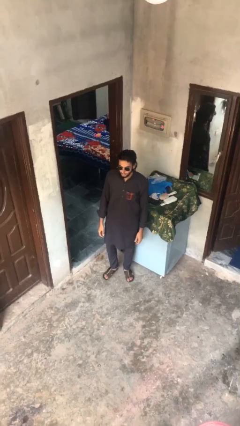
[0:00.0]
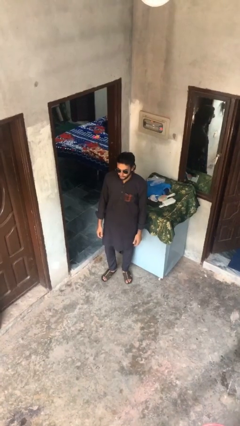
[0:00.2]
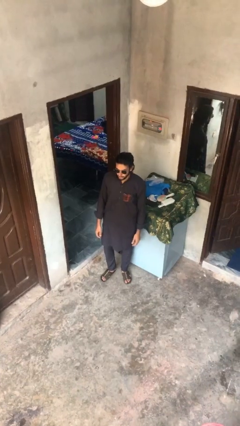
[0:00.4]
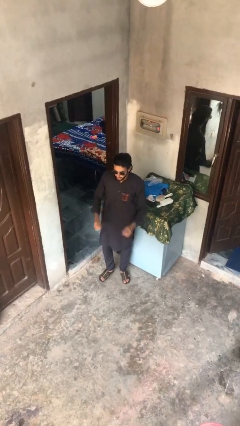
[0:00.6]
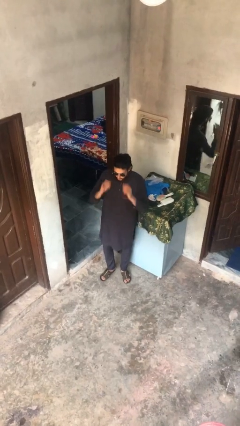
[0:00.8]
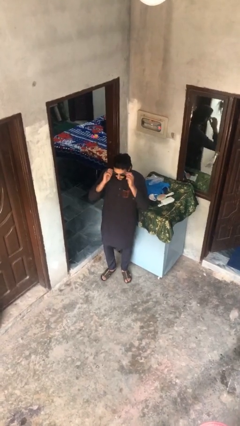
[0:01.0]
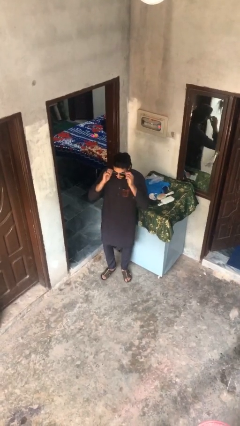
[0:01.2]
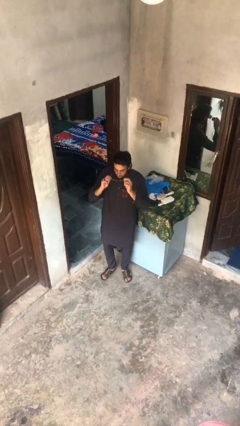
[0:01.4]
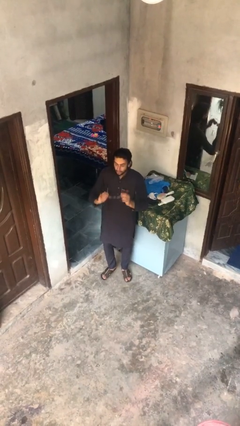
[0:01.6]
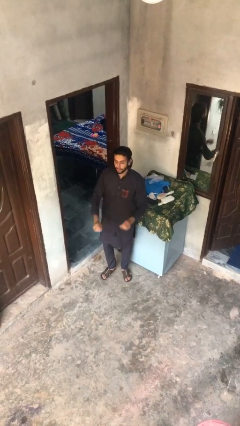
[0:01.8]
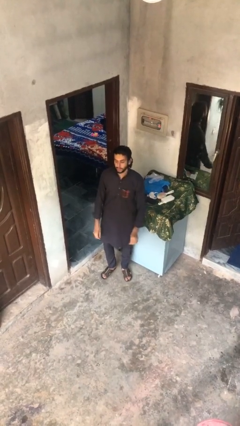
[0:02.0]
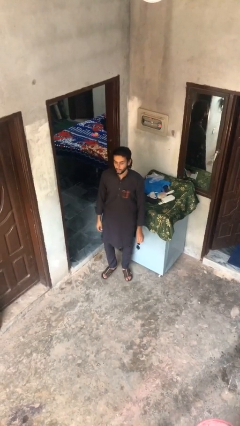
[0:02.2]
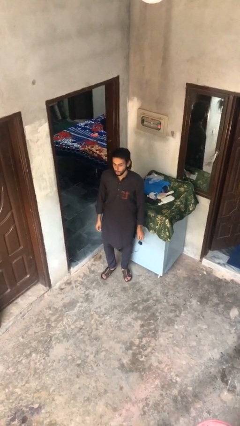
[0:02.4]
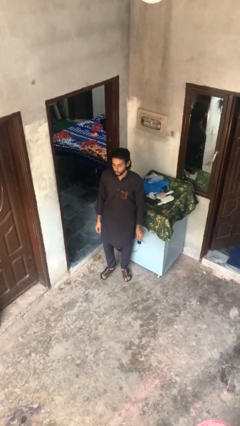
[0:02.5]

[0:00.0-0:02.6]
person takes off sunglasses

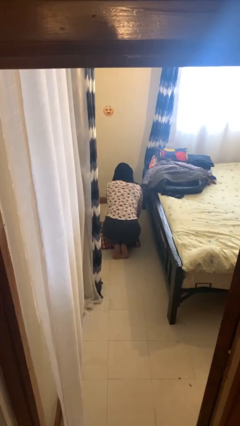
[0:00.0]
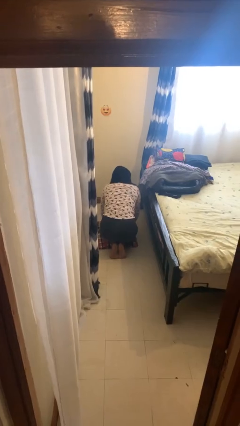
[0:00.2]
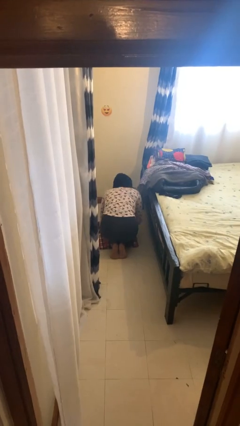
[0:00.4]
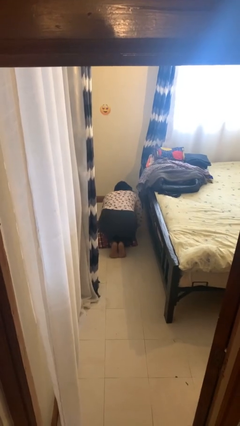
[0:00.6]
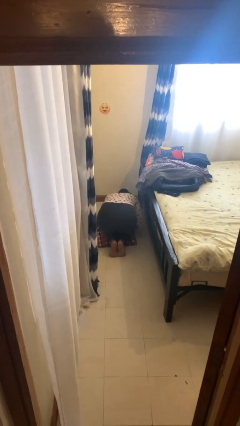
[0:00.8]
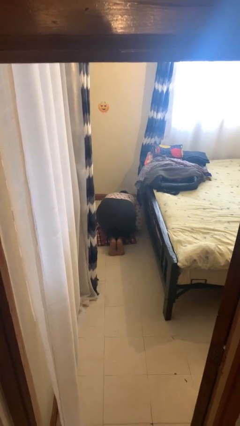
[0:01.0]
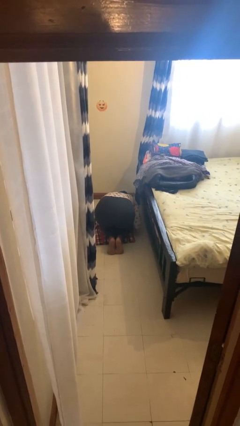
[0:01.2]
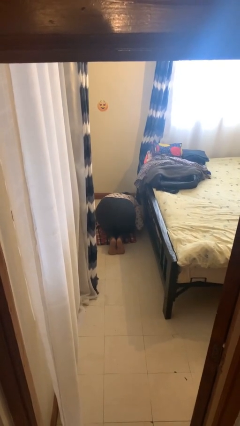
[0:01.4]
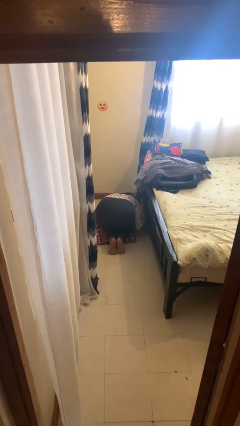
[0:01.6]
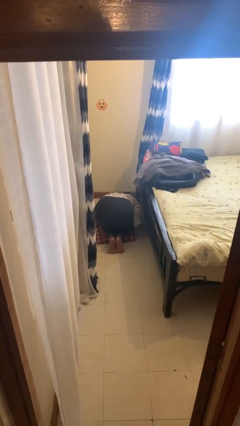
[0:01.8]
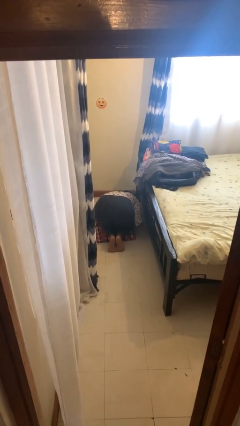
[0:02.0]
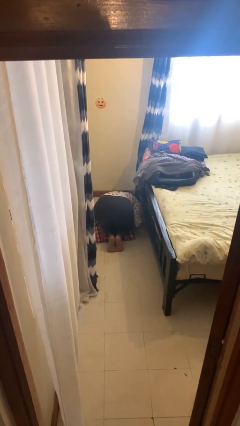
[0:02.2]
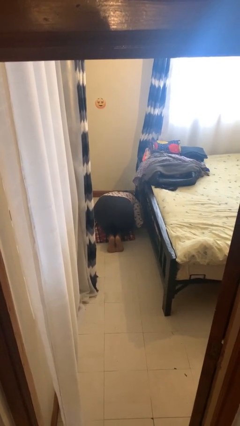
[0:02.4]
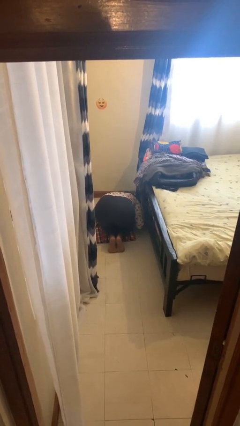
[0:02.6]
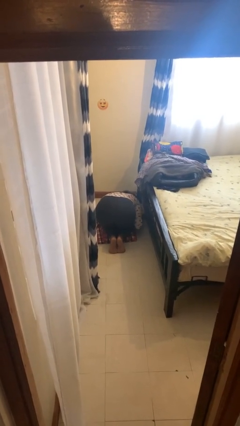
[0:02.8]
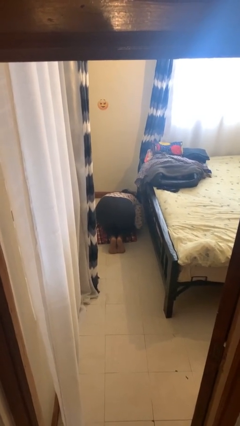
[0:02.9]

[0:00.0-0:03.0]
person searches under bed

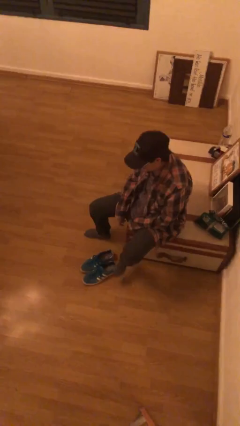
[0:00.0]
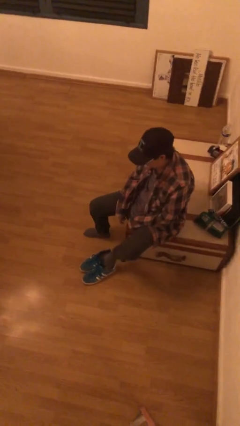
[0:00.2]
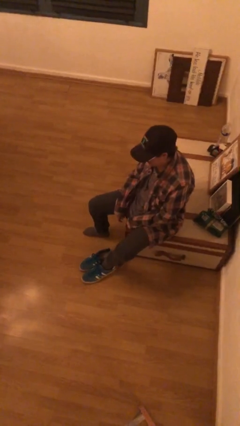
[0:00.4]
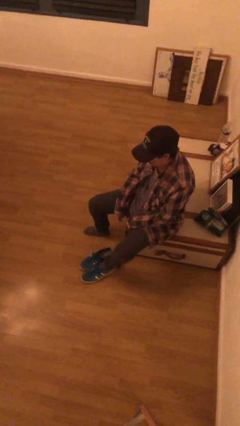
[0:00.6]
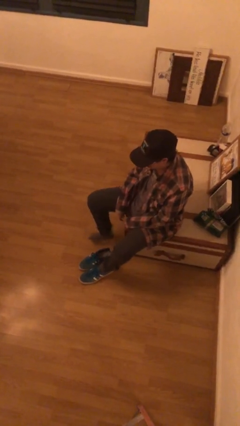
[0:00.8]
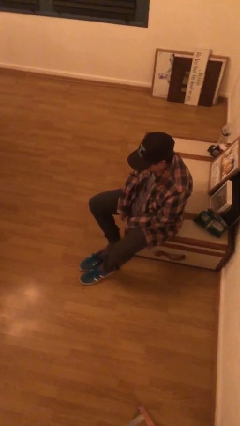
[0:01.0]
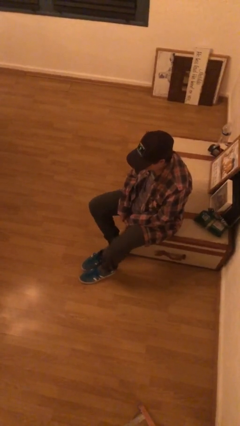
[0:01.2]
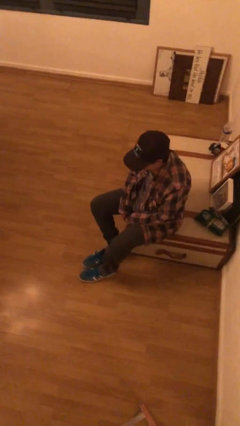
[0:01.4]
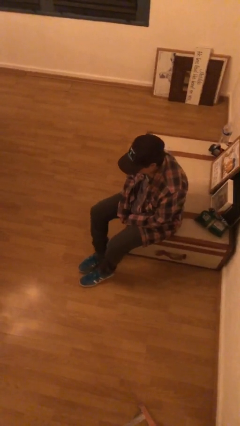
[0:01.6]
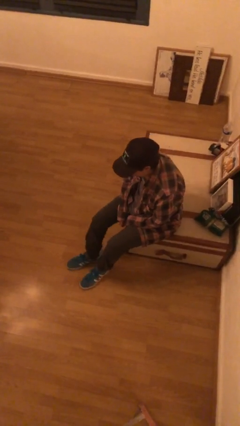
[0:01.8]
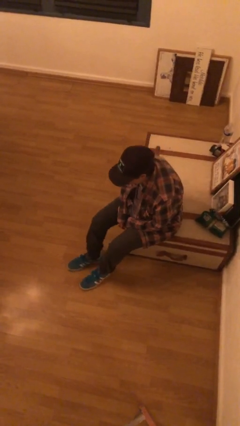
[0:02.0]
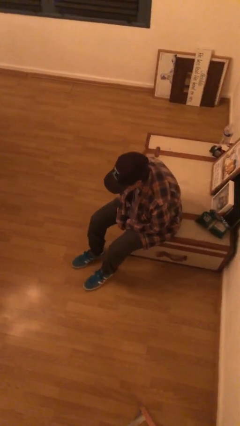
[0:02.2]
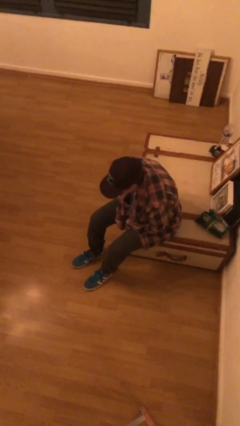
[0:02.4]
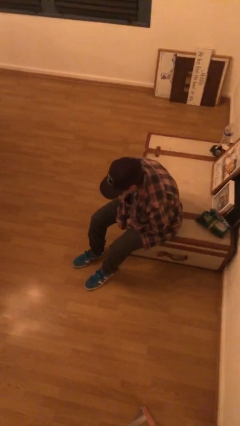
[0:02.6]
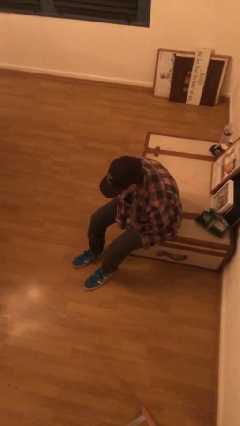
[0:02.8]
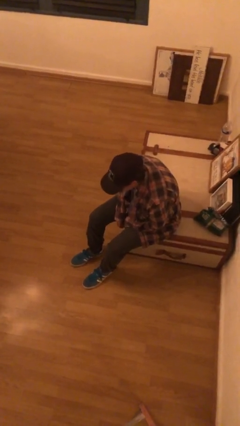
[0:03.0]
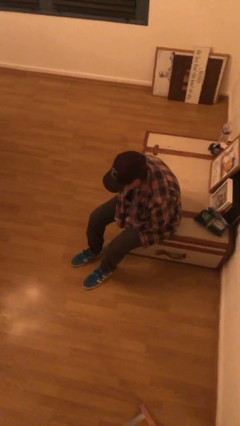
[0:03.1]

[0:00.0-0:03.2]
person puts on shoes

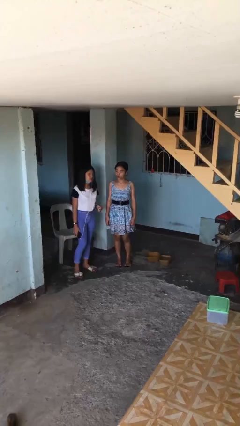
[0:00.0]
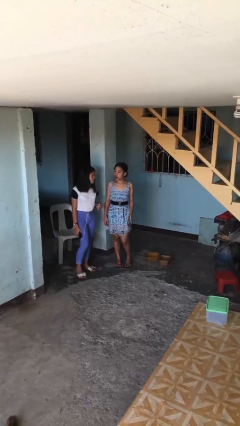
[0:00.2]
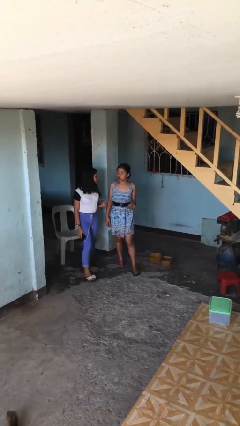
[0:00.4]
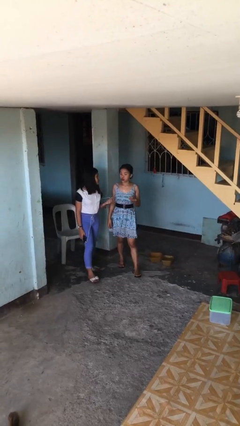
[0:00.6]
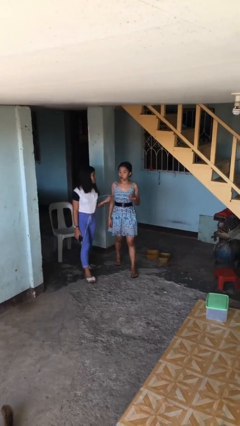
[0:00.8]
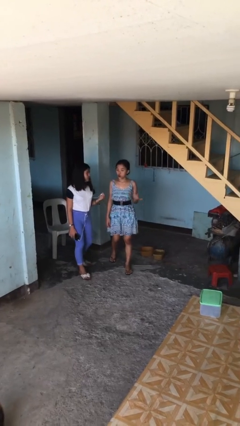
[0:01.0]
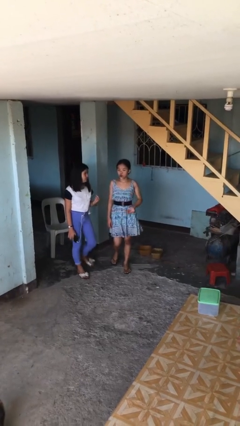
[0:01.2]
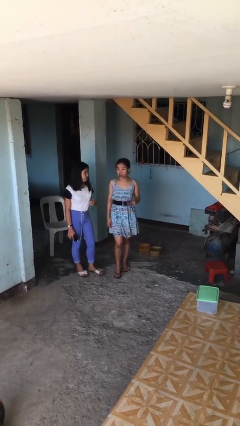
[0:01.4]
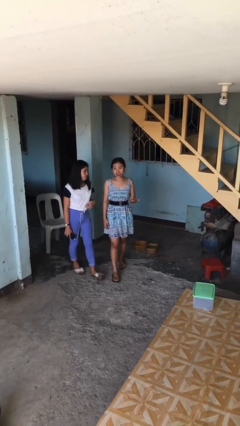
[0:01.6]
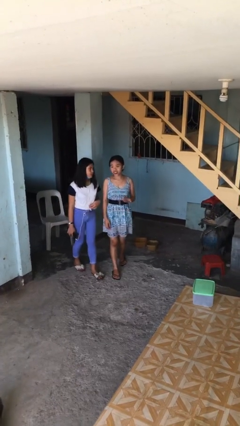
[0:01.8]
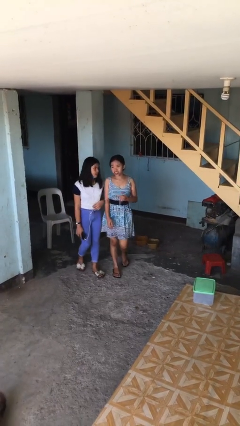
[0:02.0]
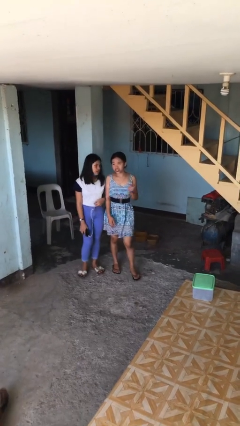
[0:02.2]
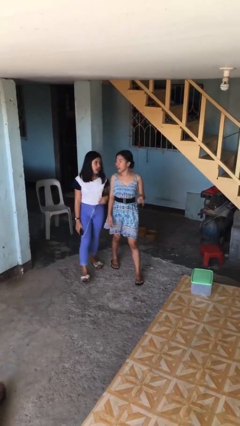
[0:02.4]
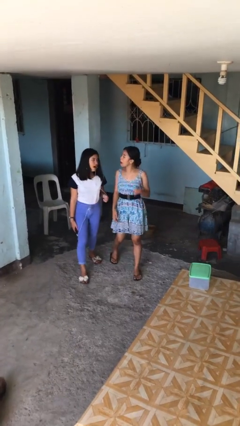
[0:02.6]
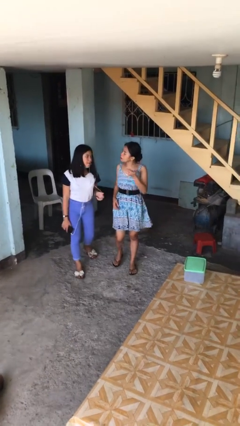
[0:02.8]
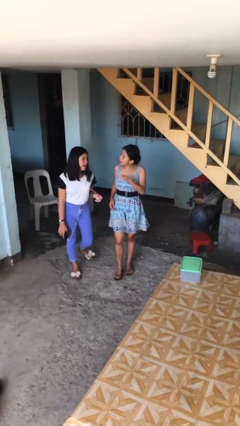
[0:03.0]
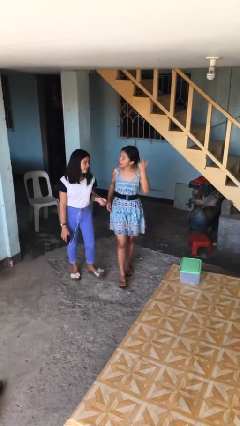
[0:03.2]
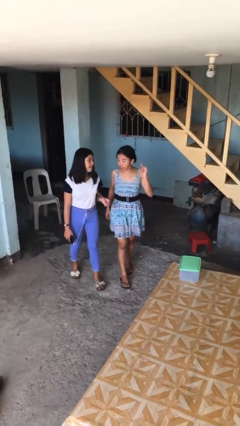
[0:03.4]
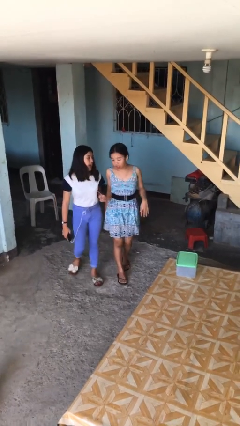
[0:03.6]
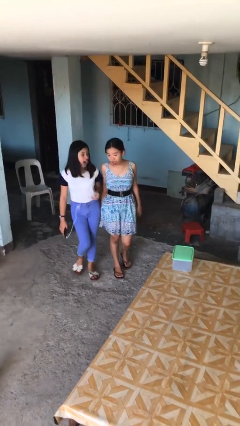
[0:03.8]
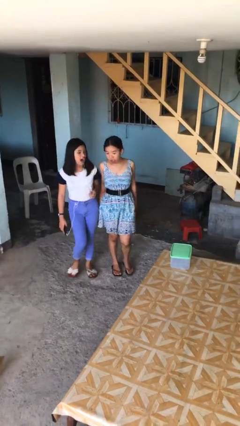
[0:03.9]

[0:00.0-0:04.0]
person talks to person

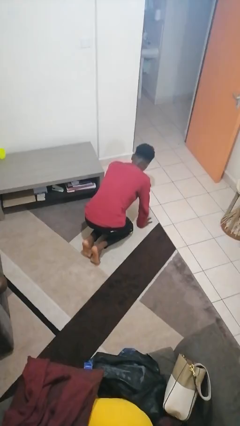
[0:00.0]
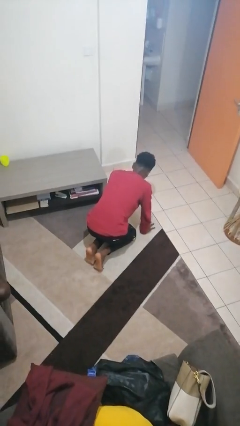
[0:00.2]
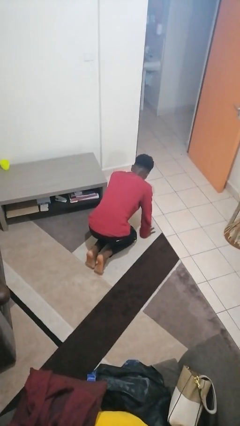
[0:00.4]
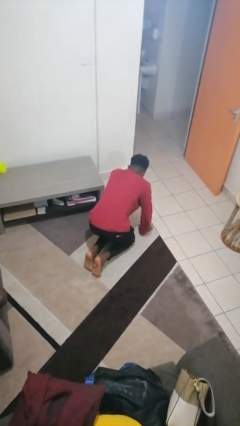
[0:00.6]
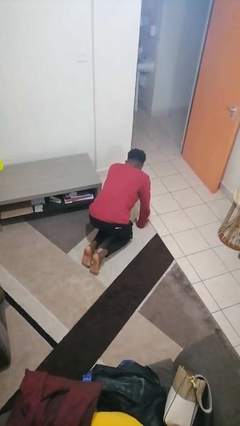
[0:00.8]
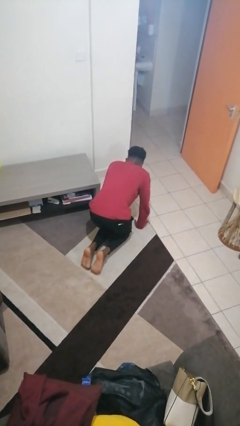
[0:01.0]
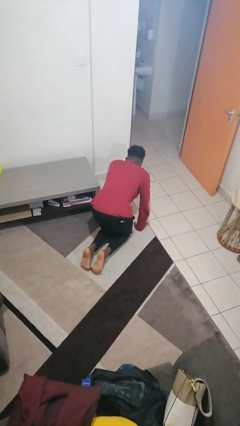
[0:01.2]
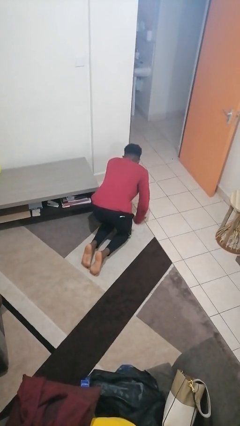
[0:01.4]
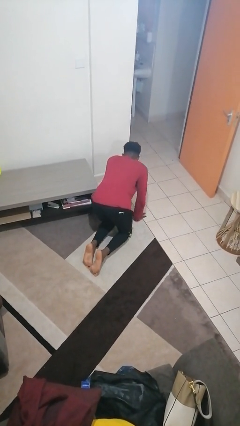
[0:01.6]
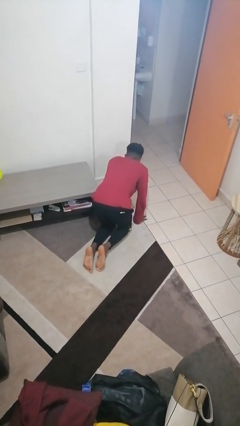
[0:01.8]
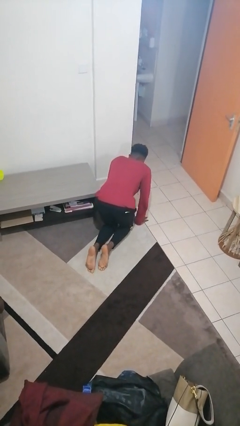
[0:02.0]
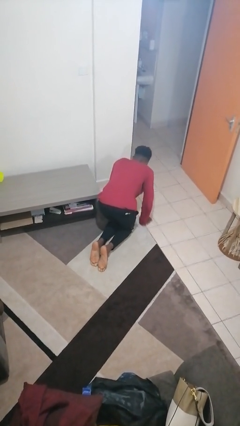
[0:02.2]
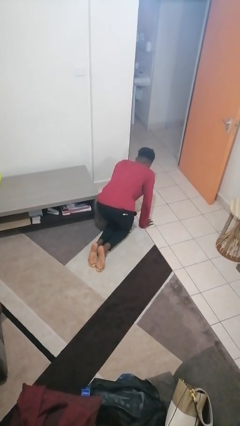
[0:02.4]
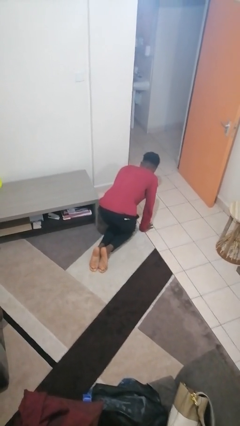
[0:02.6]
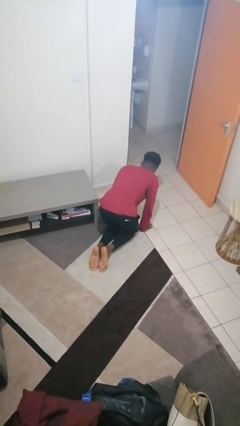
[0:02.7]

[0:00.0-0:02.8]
person crawls

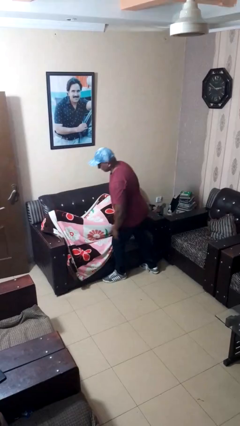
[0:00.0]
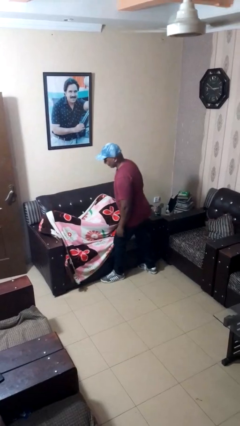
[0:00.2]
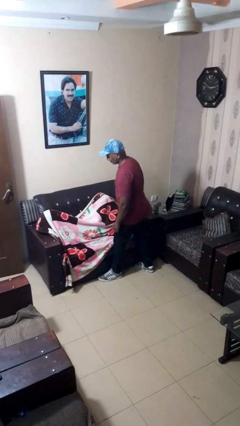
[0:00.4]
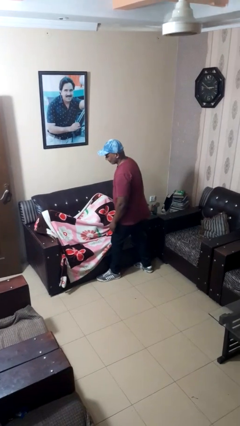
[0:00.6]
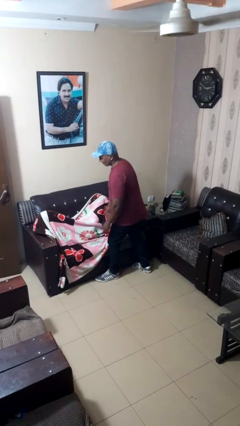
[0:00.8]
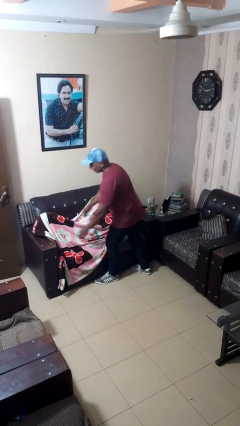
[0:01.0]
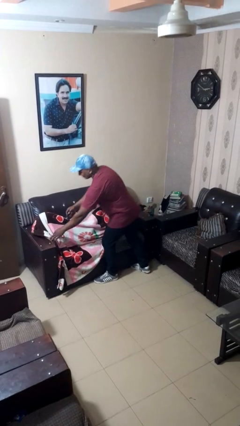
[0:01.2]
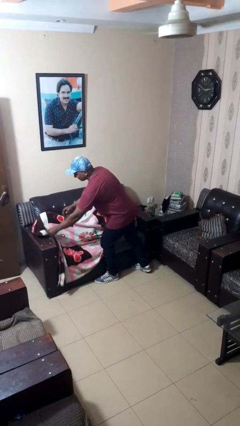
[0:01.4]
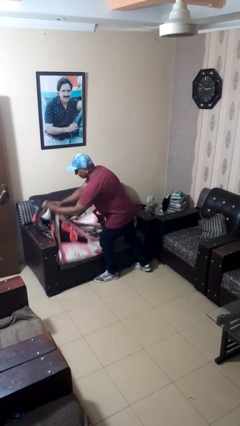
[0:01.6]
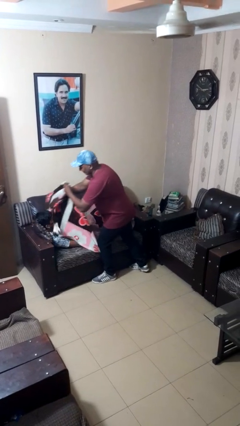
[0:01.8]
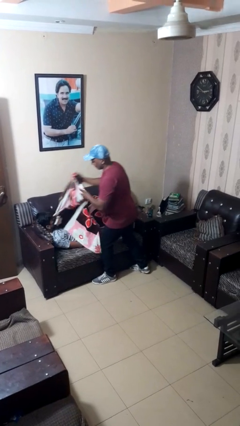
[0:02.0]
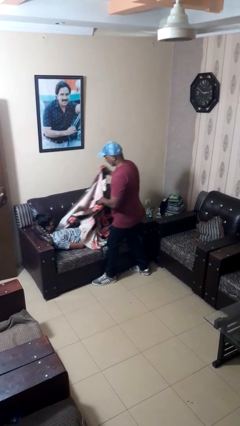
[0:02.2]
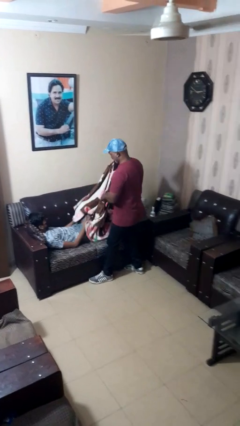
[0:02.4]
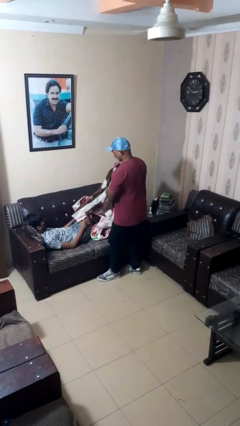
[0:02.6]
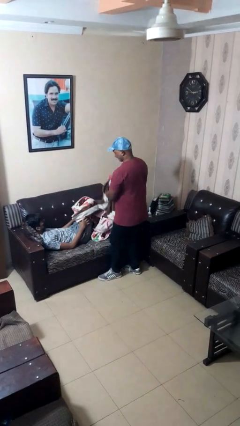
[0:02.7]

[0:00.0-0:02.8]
person uncovers friend with blanket
